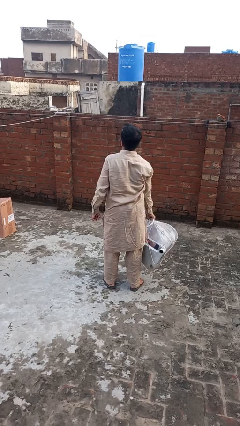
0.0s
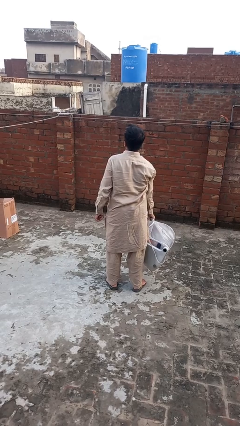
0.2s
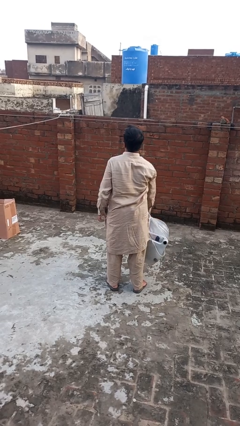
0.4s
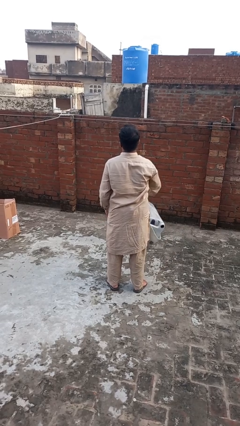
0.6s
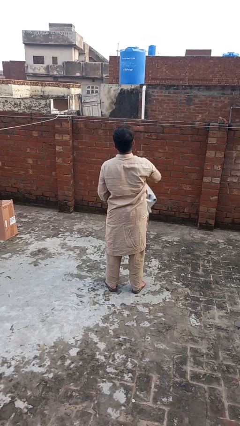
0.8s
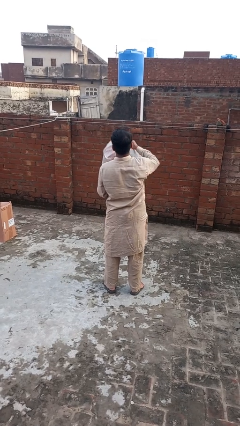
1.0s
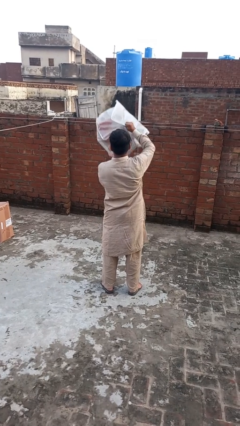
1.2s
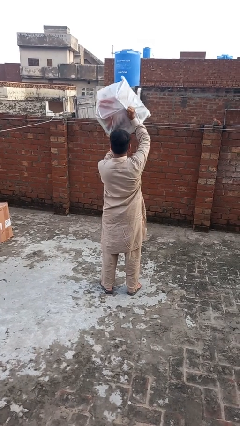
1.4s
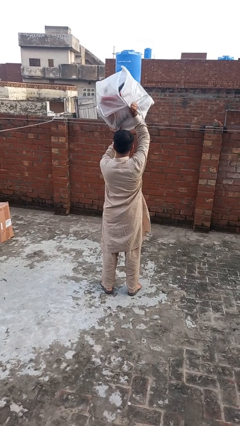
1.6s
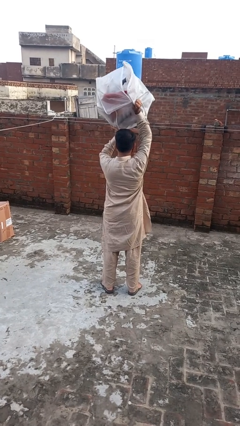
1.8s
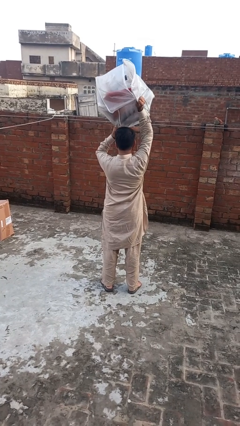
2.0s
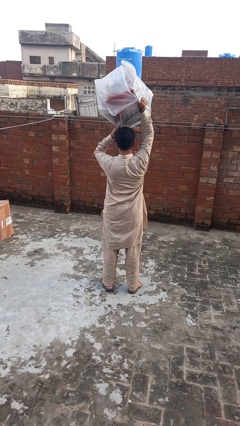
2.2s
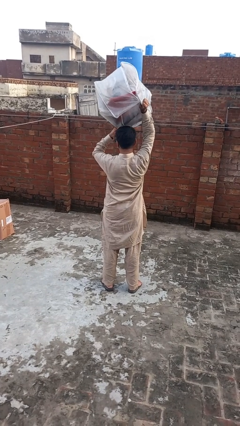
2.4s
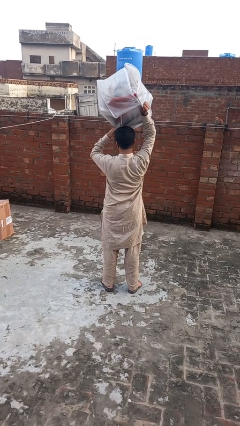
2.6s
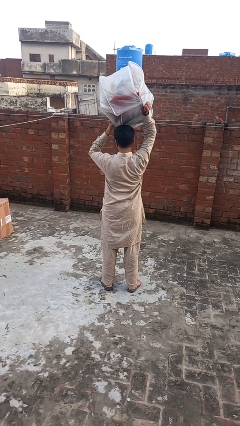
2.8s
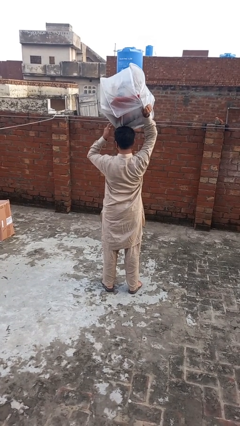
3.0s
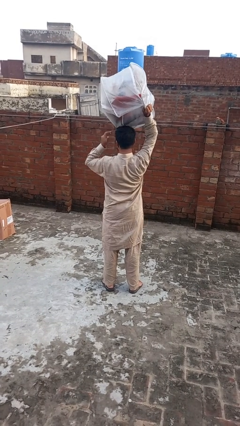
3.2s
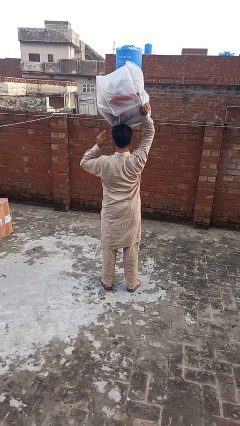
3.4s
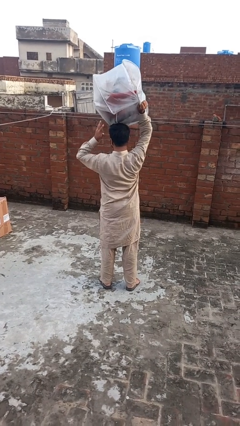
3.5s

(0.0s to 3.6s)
person holds object above head

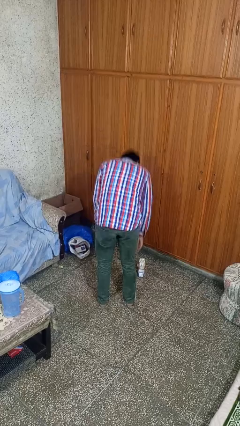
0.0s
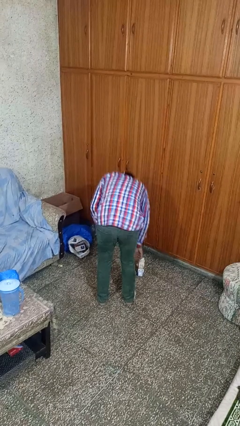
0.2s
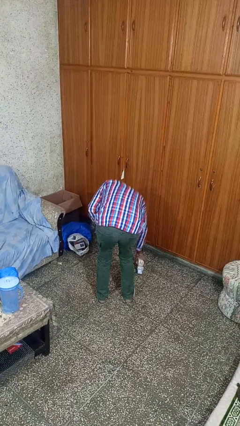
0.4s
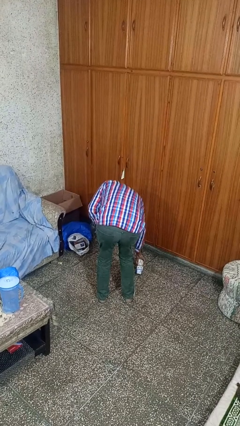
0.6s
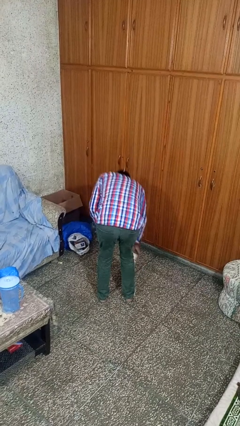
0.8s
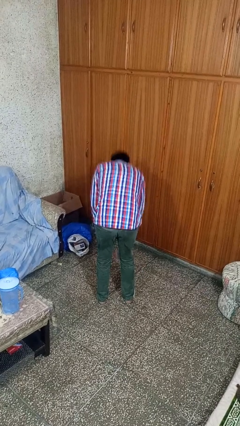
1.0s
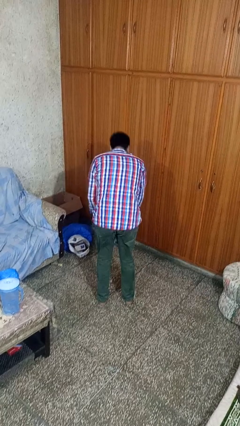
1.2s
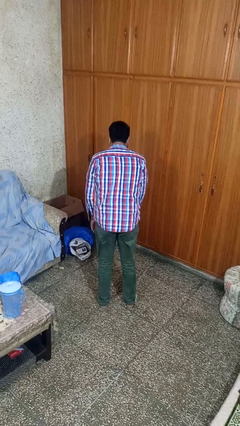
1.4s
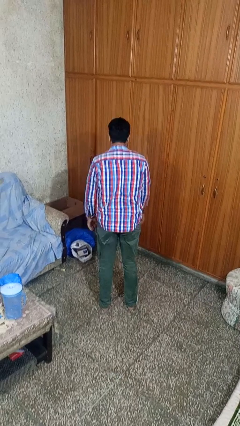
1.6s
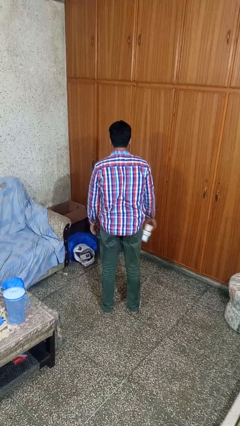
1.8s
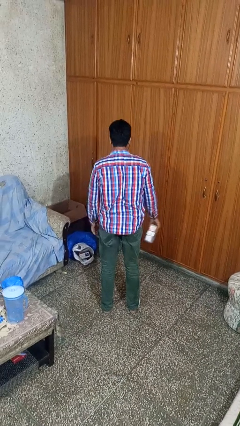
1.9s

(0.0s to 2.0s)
person picks up object from floor

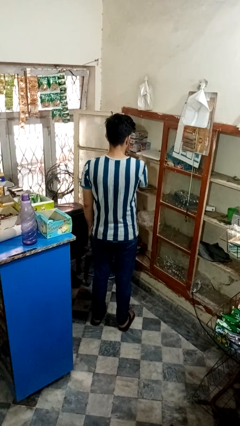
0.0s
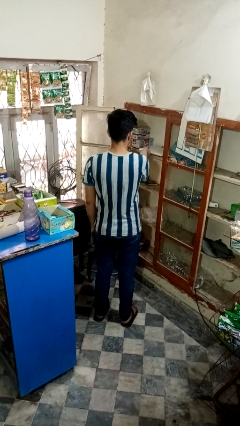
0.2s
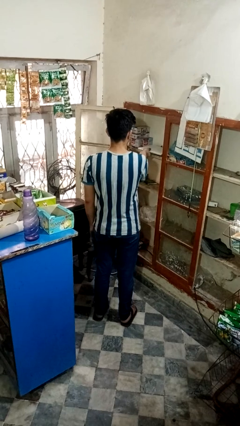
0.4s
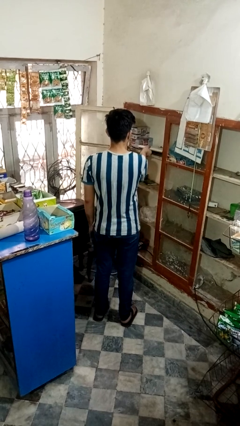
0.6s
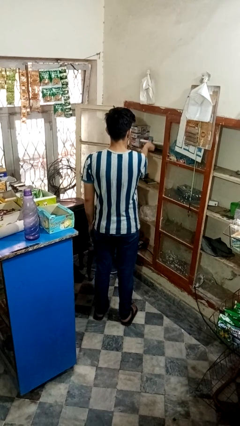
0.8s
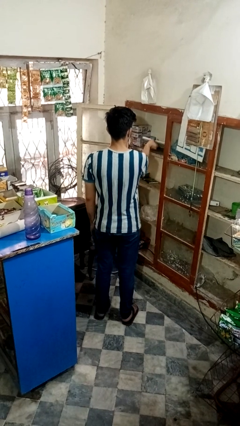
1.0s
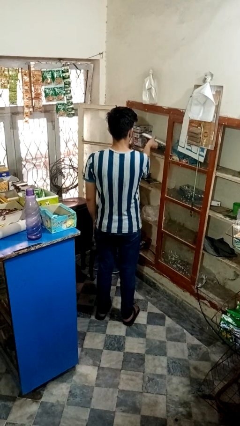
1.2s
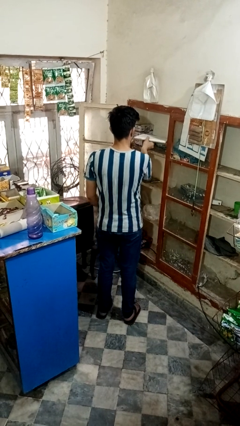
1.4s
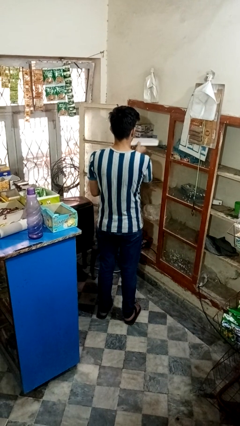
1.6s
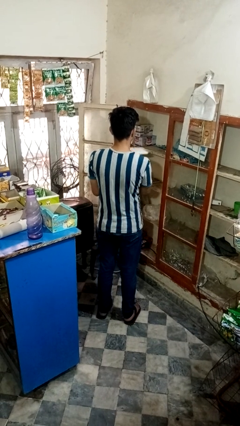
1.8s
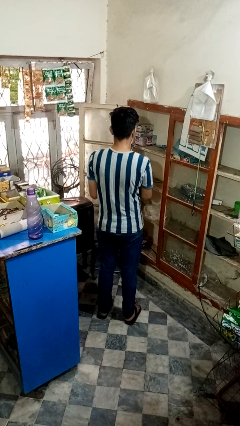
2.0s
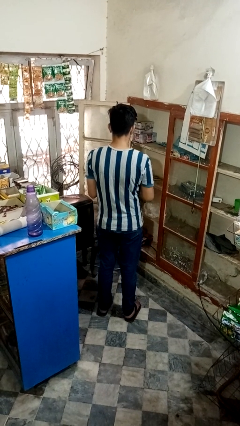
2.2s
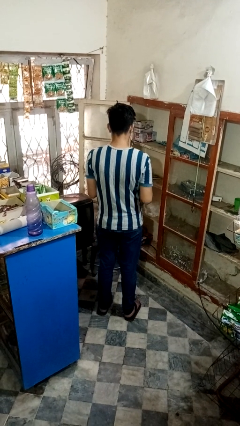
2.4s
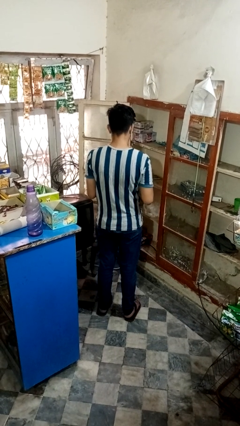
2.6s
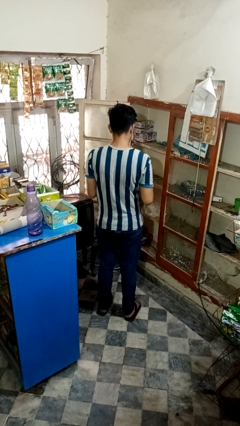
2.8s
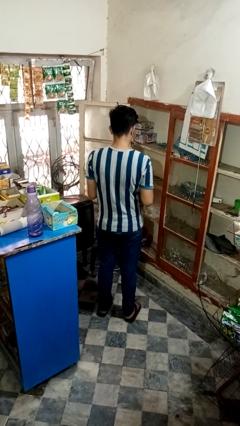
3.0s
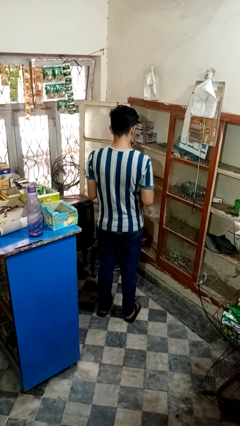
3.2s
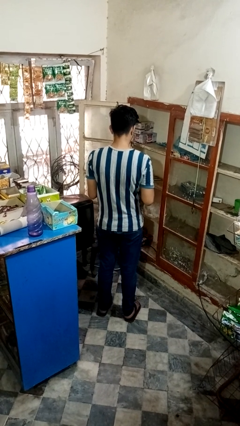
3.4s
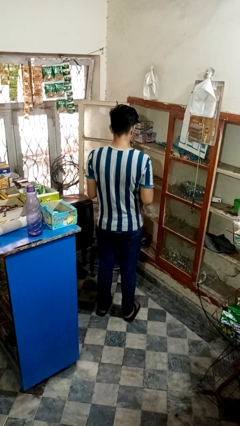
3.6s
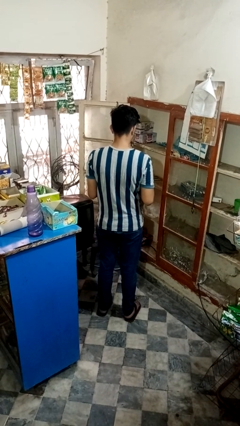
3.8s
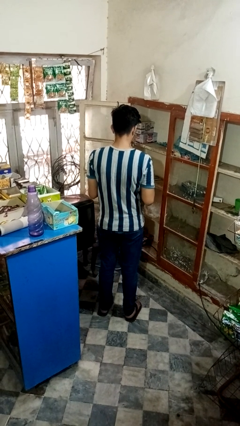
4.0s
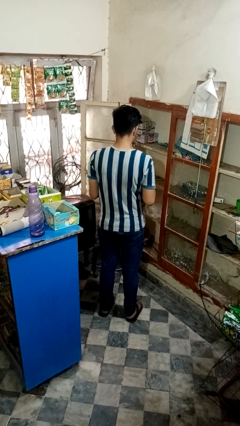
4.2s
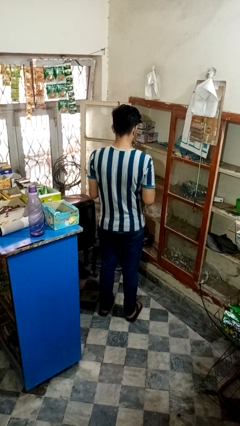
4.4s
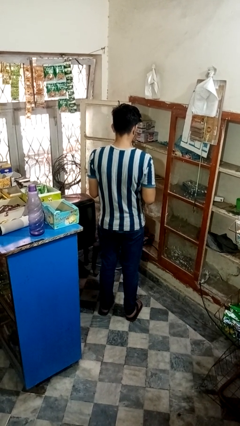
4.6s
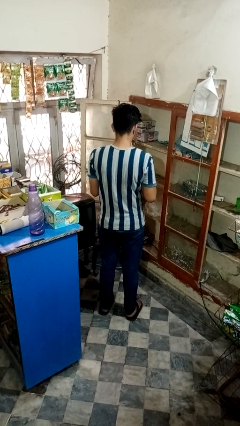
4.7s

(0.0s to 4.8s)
person picks up object from cabinet

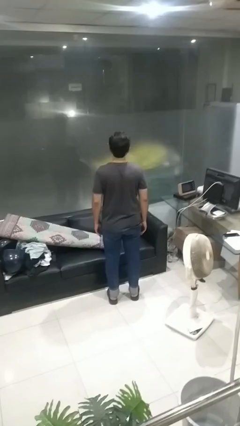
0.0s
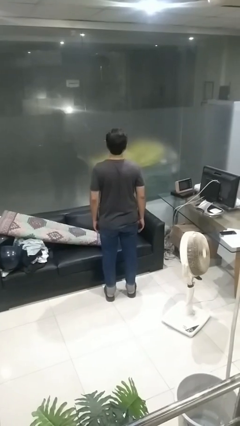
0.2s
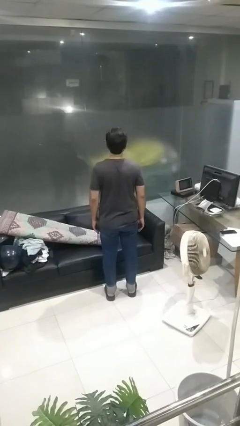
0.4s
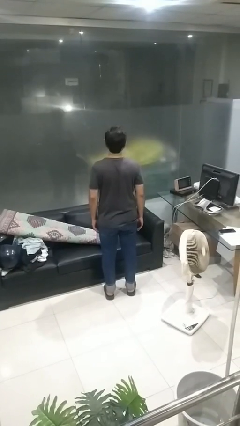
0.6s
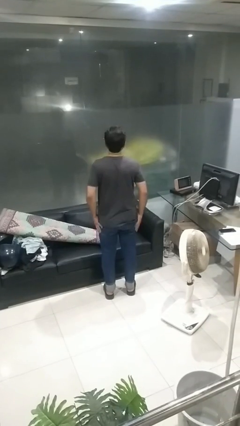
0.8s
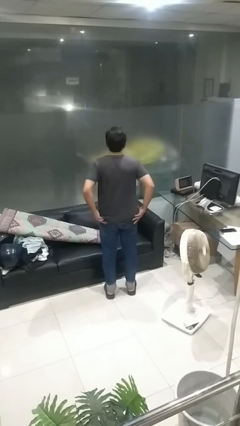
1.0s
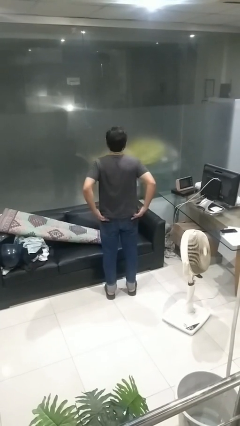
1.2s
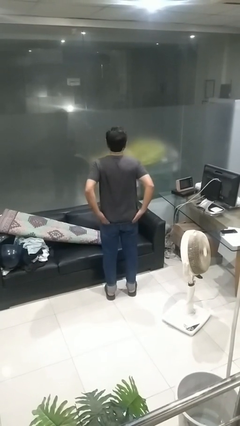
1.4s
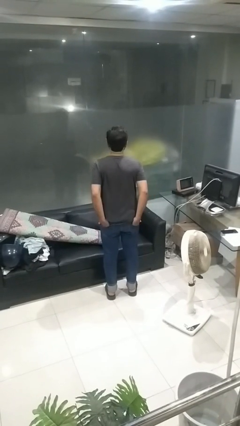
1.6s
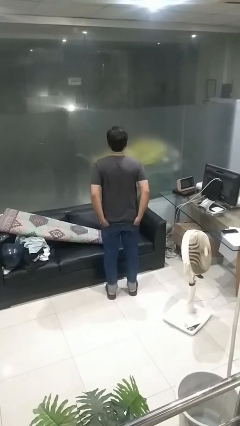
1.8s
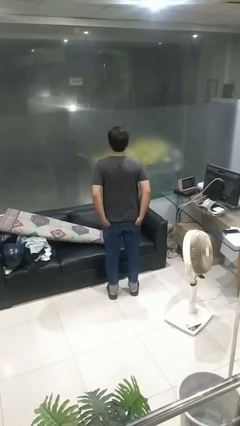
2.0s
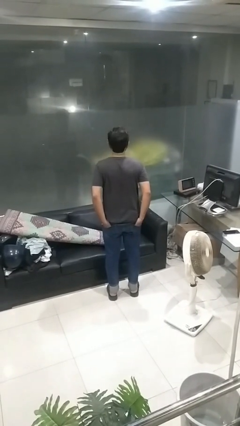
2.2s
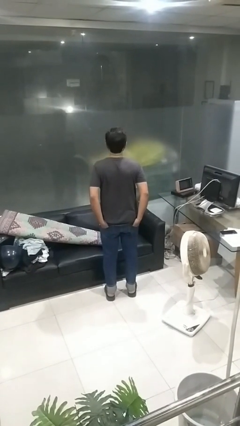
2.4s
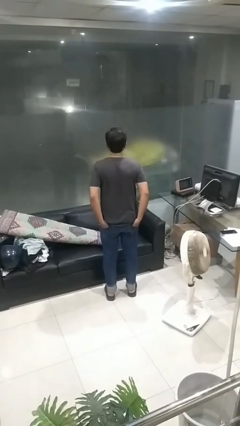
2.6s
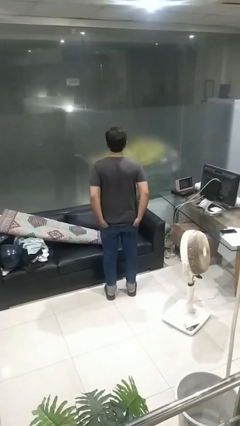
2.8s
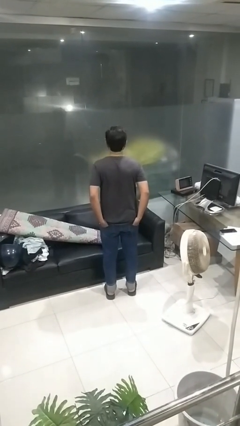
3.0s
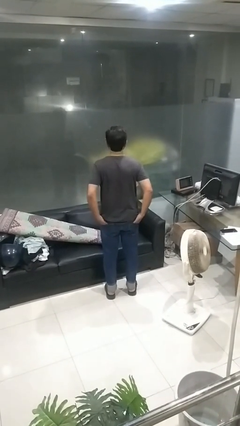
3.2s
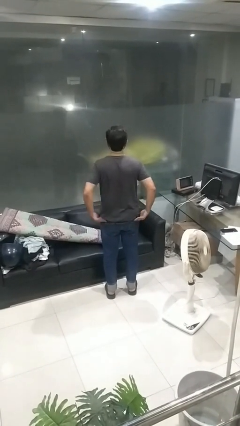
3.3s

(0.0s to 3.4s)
person puts hands in back pockets

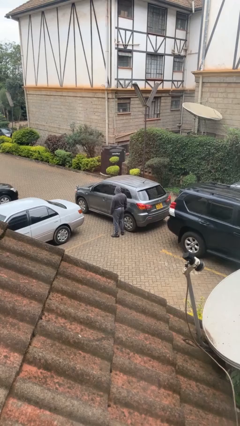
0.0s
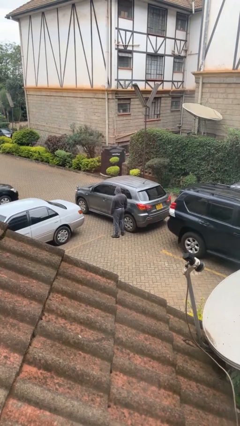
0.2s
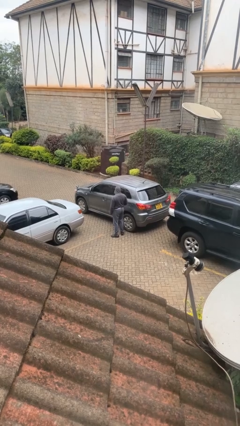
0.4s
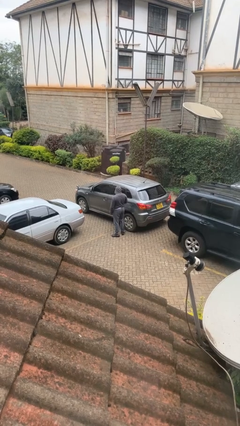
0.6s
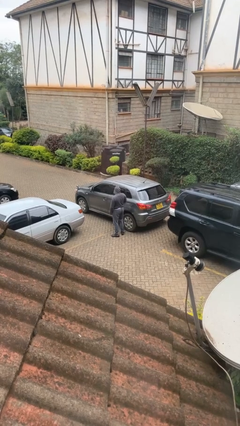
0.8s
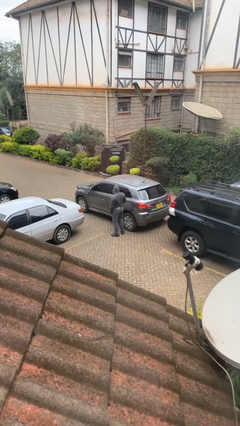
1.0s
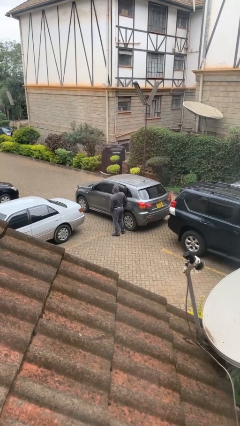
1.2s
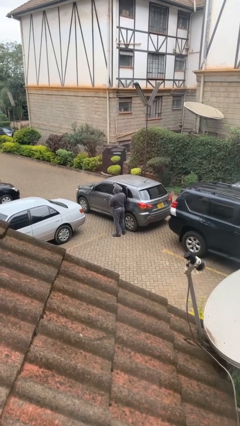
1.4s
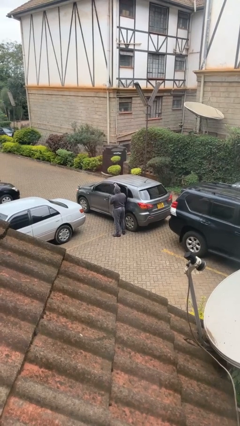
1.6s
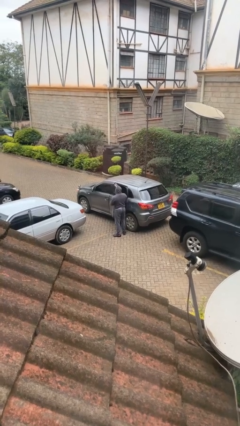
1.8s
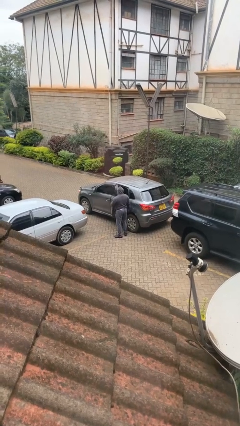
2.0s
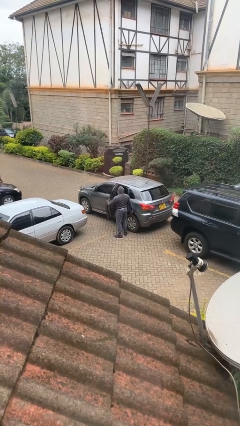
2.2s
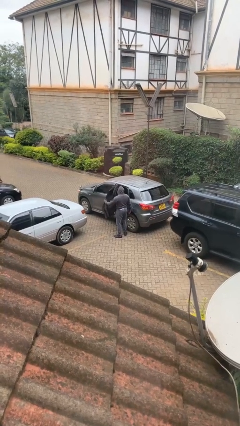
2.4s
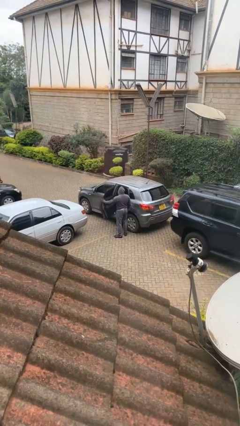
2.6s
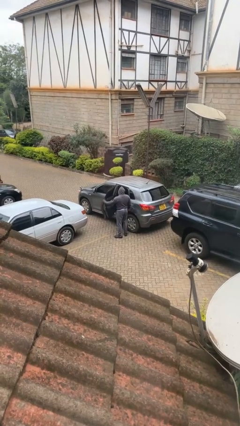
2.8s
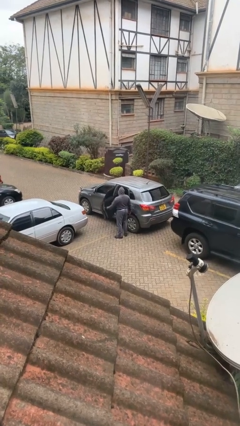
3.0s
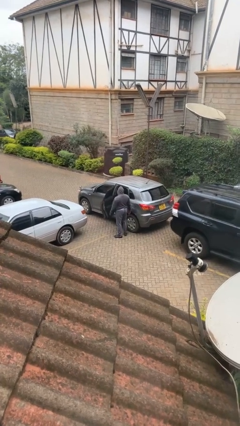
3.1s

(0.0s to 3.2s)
person opens car door

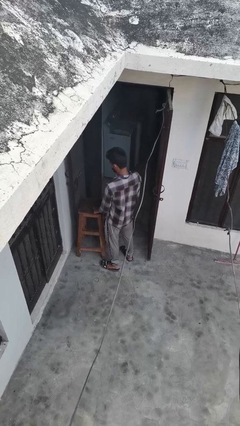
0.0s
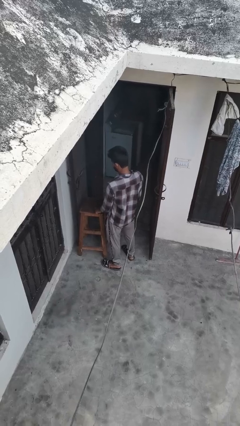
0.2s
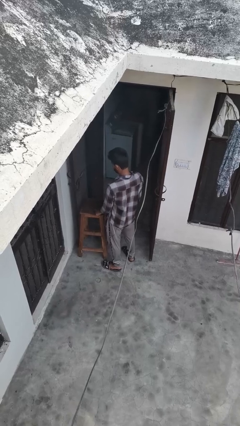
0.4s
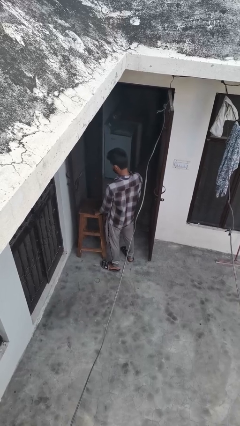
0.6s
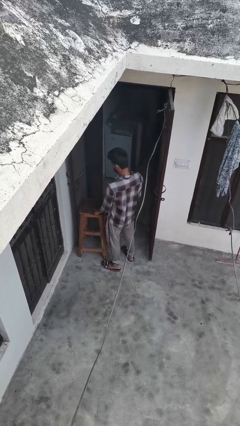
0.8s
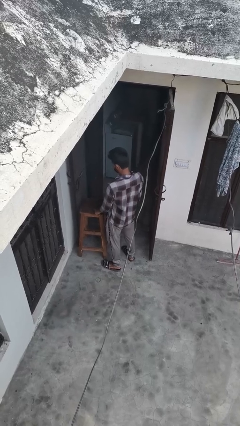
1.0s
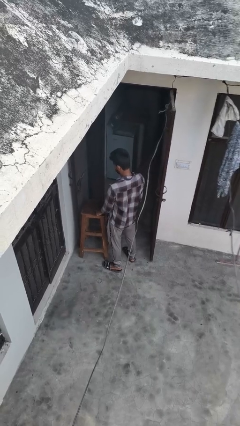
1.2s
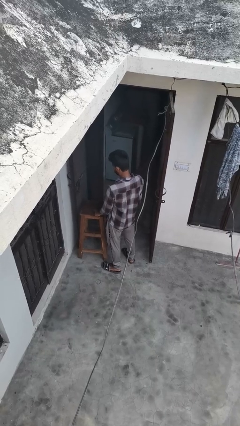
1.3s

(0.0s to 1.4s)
person taps object with finger
